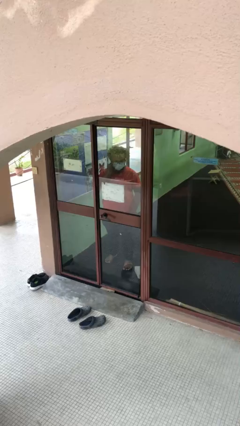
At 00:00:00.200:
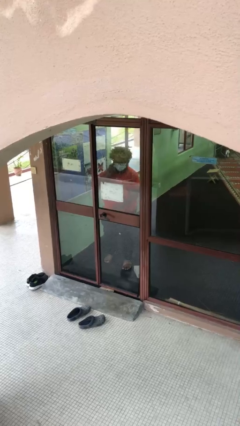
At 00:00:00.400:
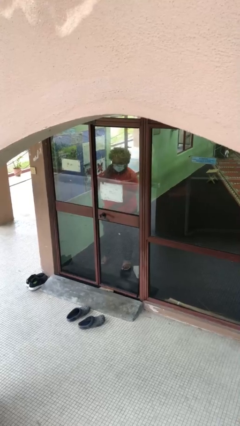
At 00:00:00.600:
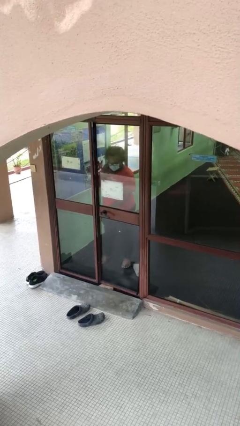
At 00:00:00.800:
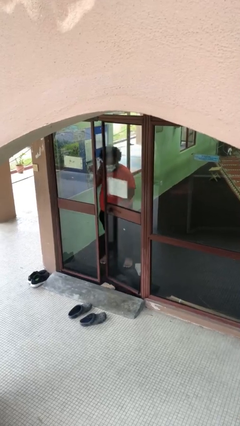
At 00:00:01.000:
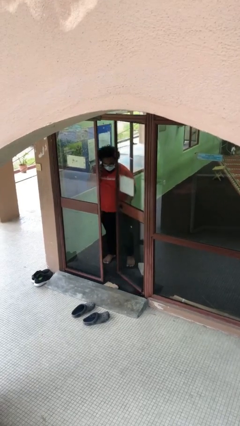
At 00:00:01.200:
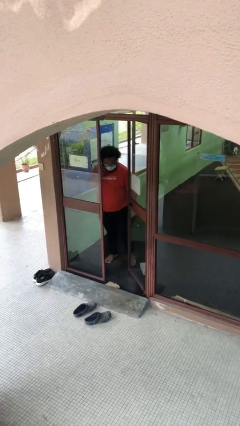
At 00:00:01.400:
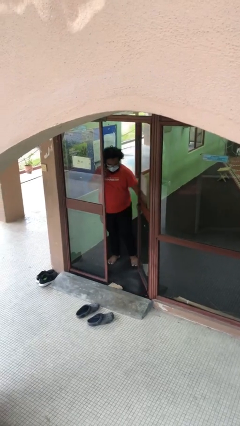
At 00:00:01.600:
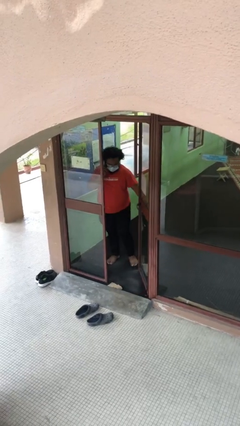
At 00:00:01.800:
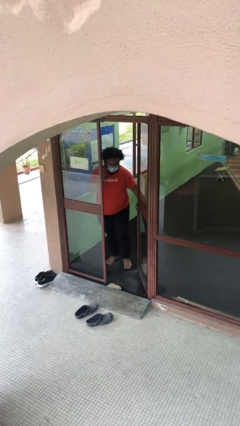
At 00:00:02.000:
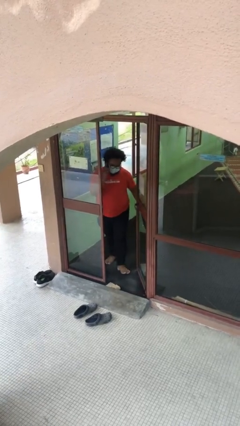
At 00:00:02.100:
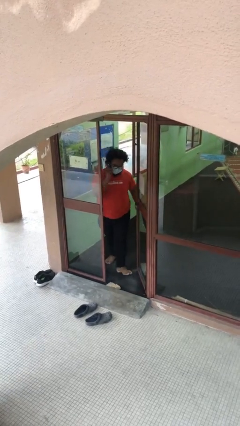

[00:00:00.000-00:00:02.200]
person opens facility door

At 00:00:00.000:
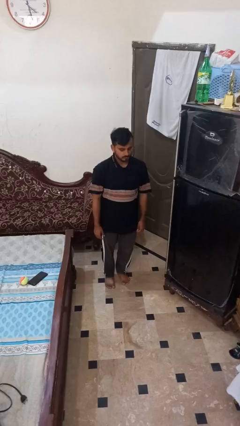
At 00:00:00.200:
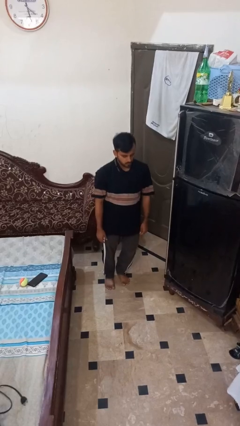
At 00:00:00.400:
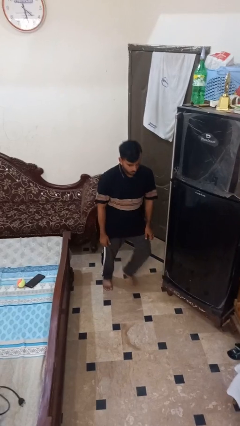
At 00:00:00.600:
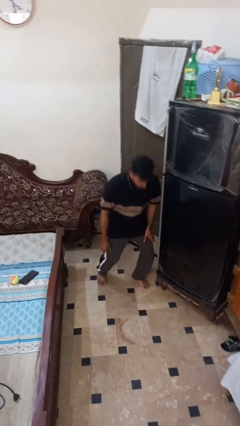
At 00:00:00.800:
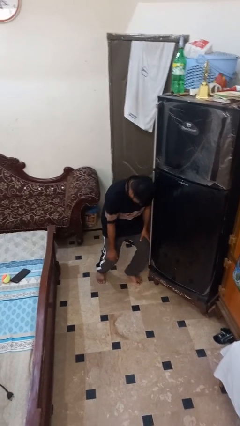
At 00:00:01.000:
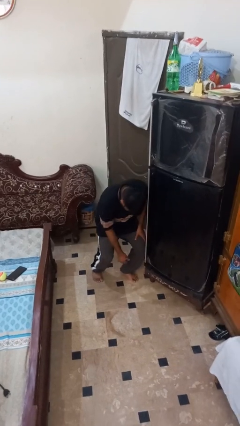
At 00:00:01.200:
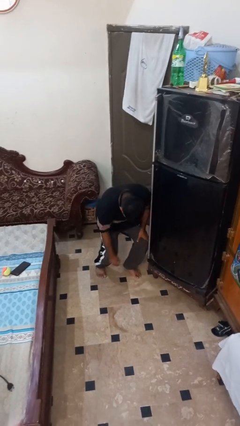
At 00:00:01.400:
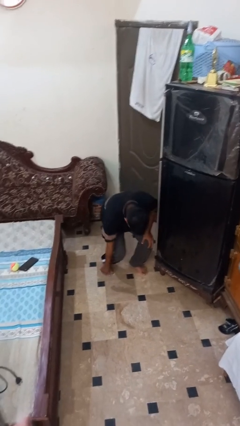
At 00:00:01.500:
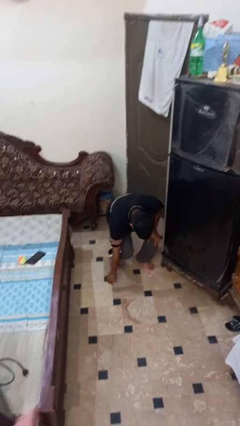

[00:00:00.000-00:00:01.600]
person trips on object on floor

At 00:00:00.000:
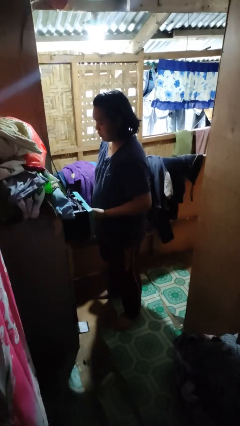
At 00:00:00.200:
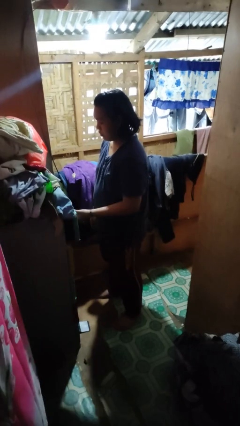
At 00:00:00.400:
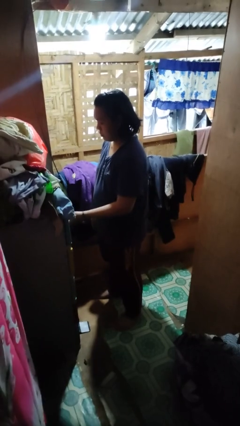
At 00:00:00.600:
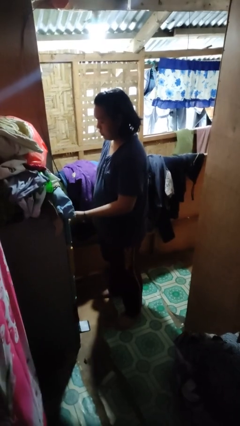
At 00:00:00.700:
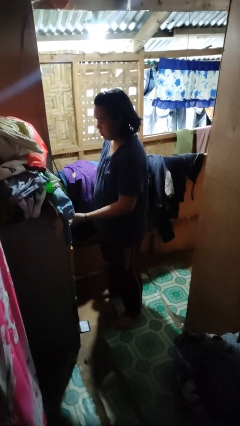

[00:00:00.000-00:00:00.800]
person closes dresser drawer

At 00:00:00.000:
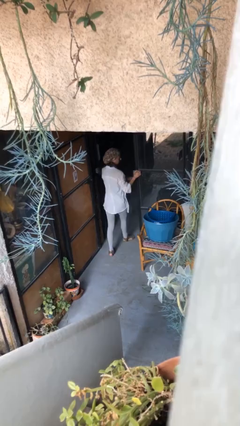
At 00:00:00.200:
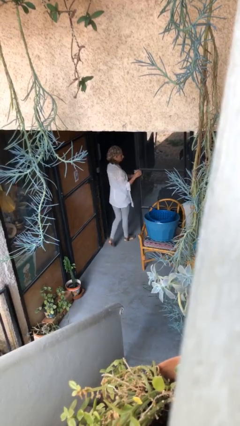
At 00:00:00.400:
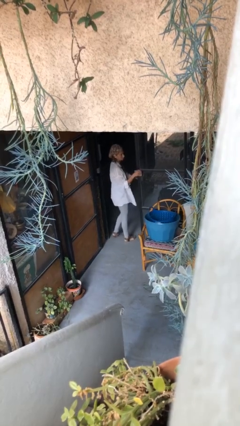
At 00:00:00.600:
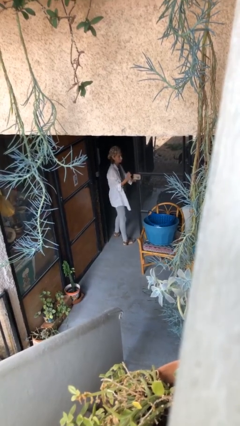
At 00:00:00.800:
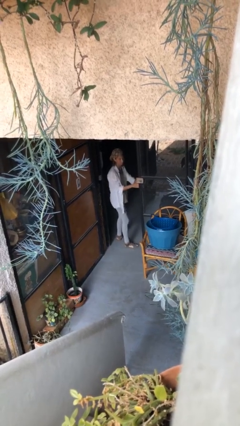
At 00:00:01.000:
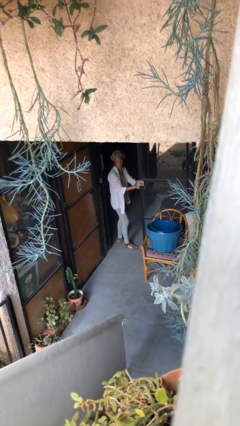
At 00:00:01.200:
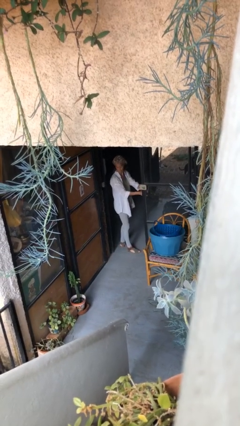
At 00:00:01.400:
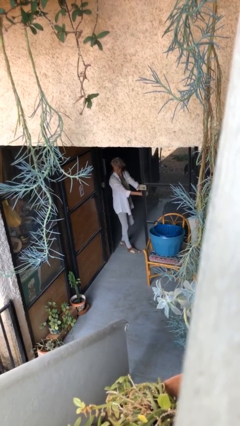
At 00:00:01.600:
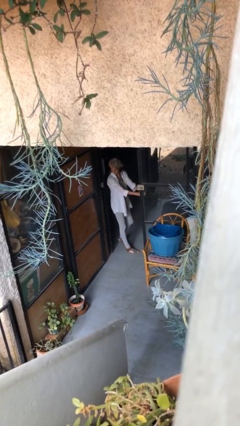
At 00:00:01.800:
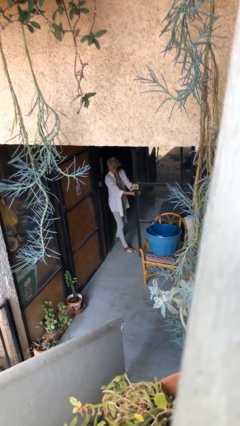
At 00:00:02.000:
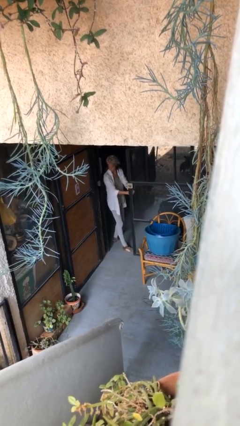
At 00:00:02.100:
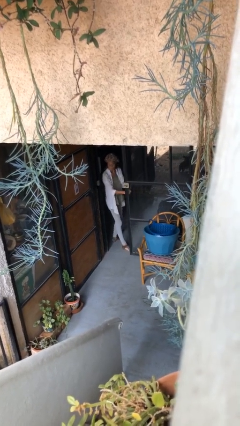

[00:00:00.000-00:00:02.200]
person exits scene through structure

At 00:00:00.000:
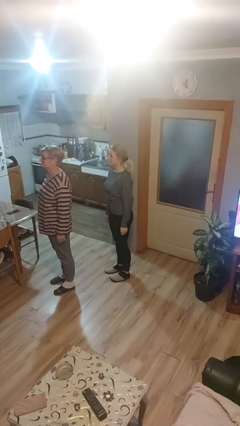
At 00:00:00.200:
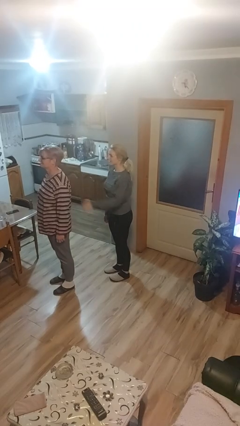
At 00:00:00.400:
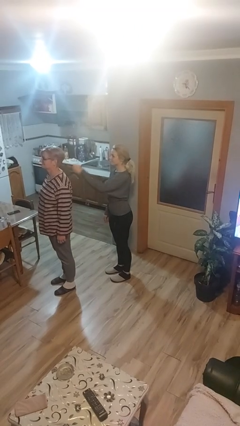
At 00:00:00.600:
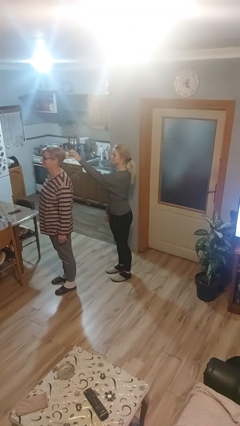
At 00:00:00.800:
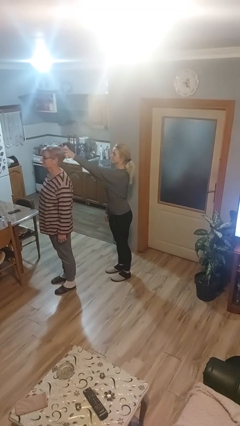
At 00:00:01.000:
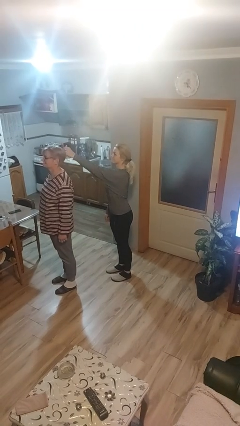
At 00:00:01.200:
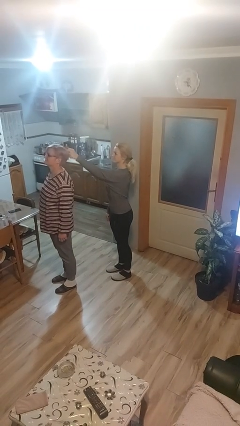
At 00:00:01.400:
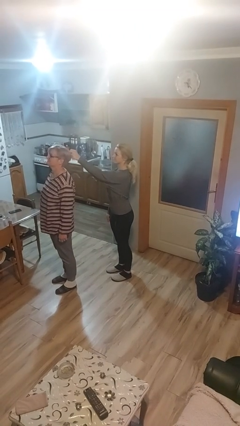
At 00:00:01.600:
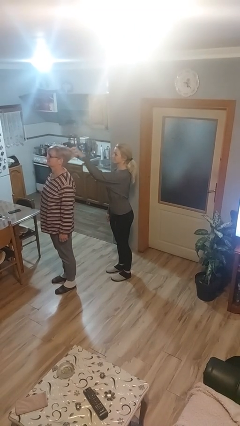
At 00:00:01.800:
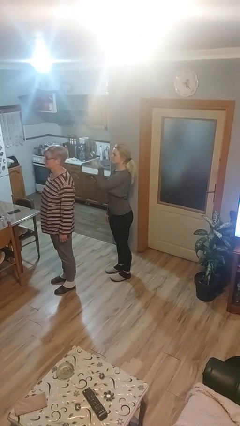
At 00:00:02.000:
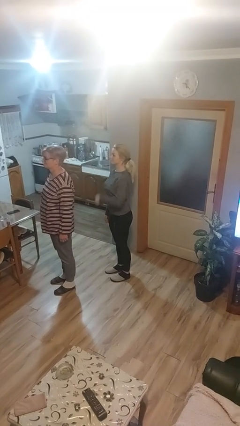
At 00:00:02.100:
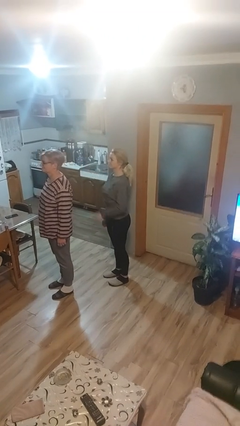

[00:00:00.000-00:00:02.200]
person grabs person by hair

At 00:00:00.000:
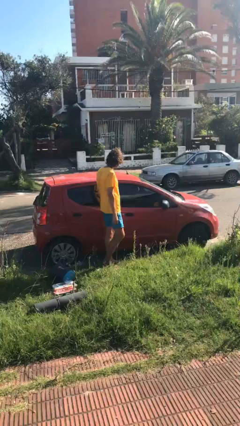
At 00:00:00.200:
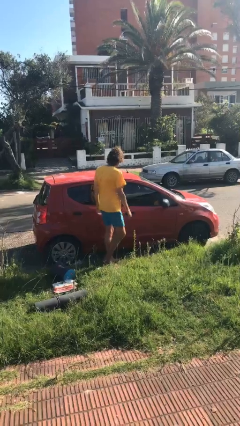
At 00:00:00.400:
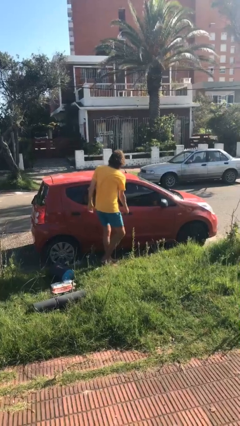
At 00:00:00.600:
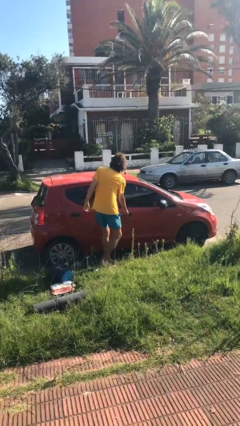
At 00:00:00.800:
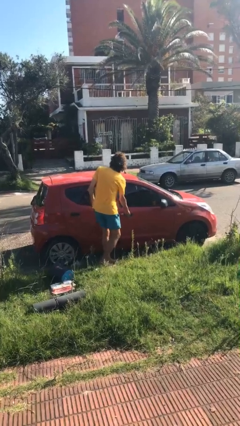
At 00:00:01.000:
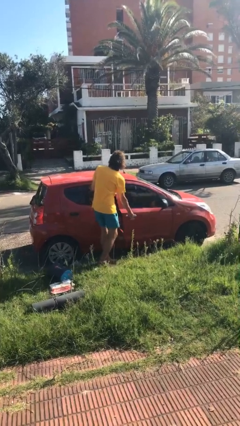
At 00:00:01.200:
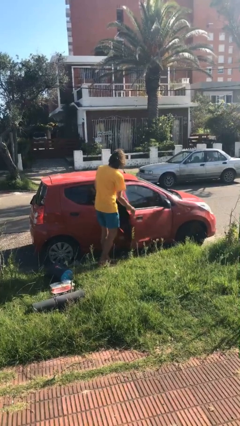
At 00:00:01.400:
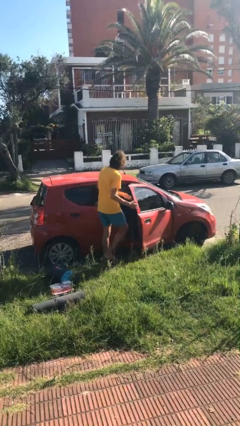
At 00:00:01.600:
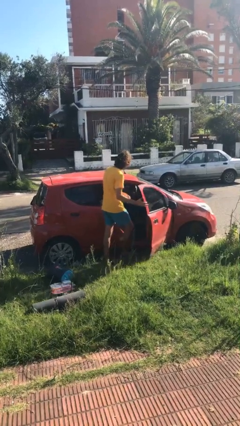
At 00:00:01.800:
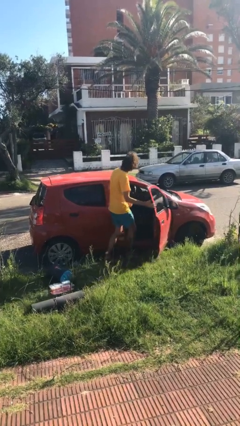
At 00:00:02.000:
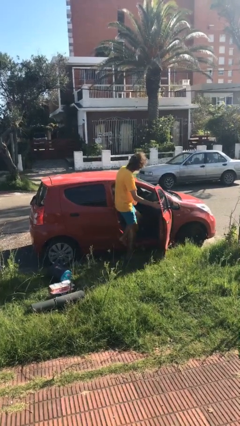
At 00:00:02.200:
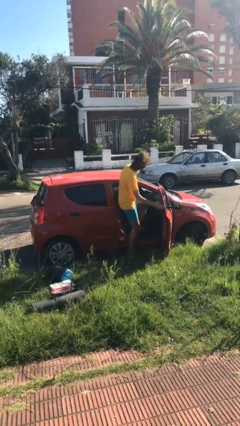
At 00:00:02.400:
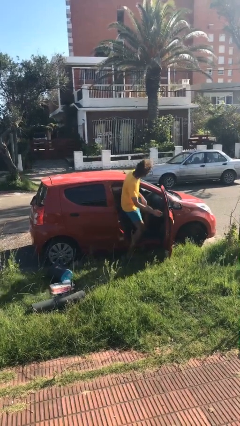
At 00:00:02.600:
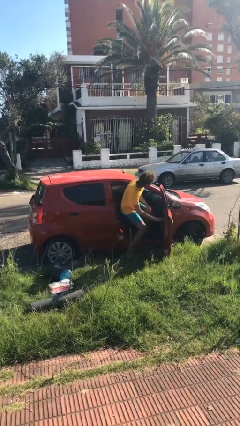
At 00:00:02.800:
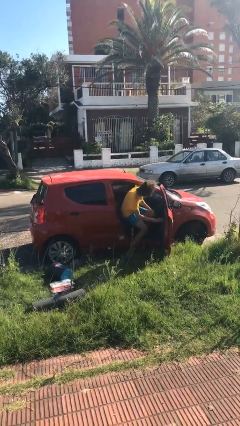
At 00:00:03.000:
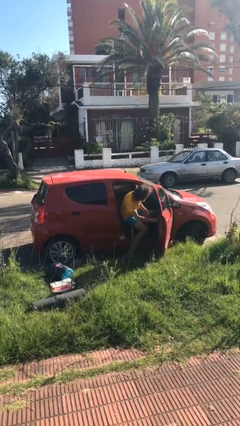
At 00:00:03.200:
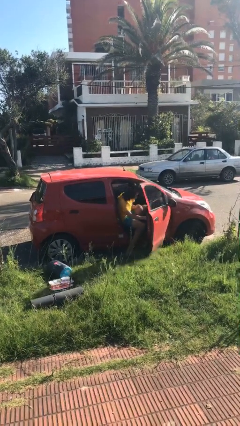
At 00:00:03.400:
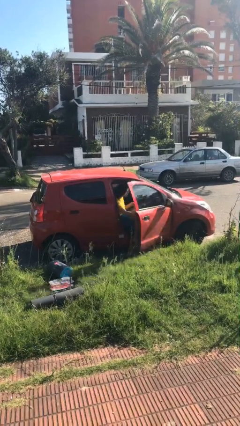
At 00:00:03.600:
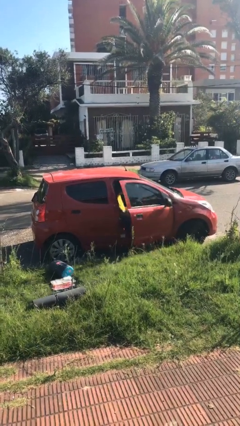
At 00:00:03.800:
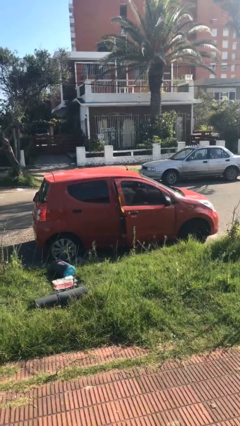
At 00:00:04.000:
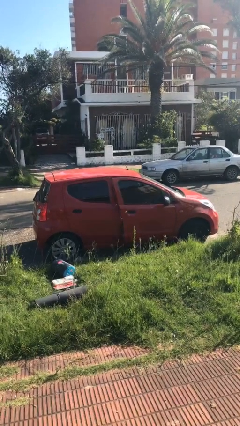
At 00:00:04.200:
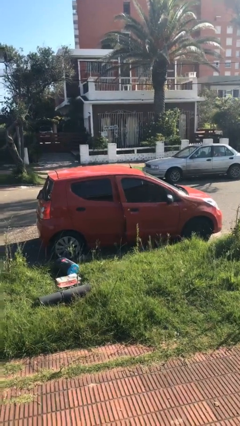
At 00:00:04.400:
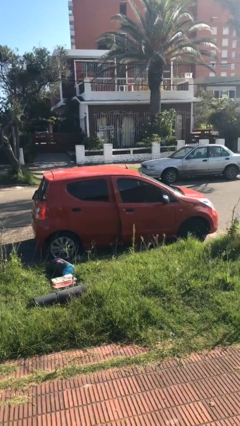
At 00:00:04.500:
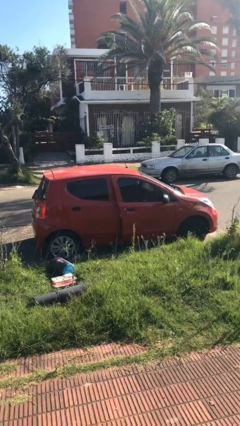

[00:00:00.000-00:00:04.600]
car picks up person

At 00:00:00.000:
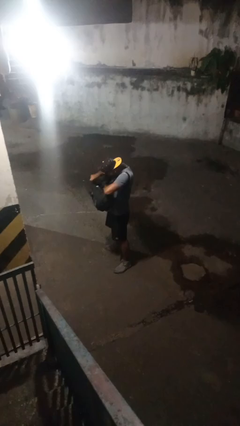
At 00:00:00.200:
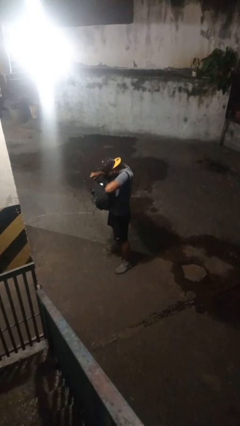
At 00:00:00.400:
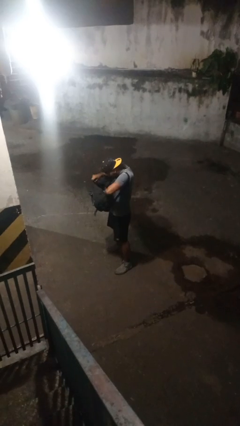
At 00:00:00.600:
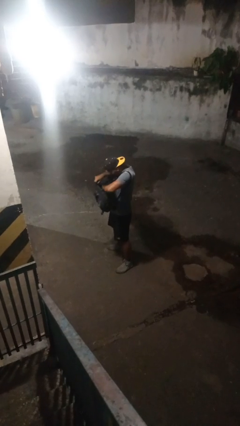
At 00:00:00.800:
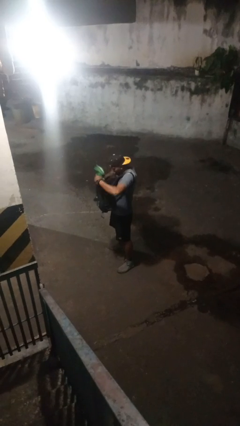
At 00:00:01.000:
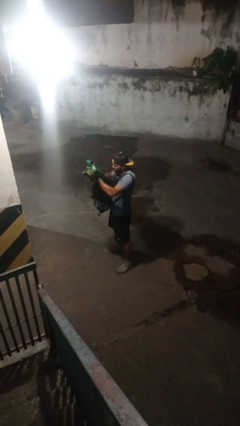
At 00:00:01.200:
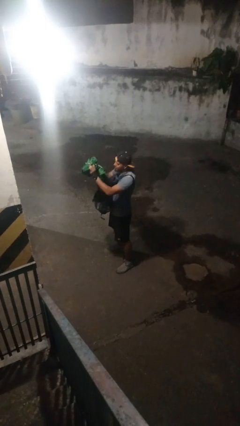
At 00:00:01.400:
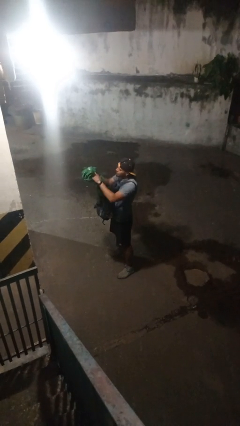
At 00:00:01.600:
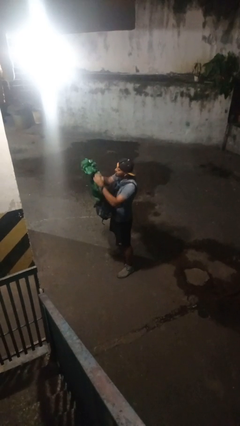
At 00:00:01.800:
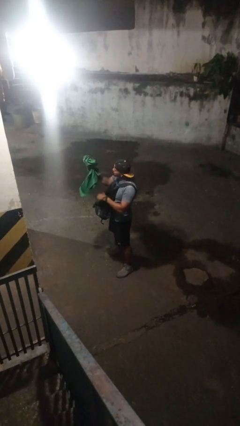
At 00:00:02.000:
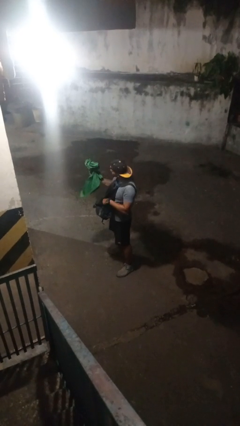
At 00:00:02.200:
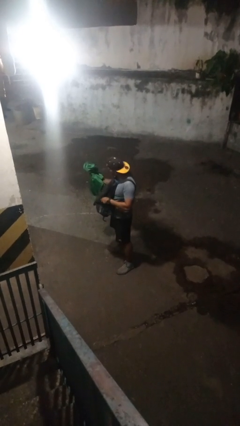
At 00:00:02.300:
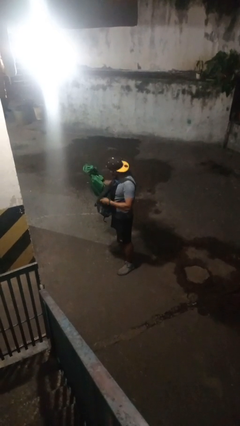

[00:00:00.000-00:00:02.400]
person takes object from backpack

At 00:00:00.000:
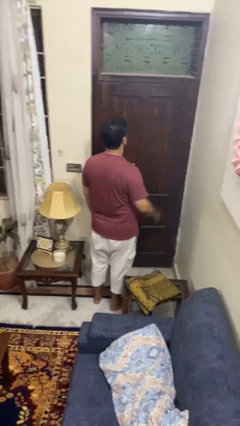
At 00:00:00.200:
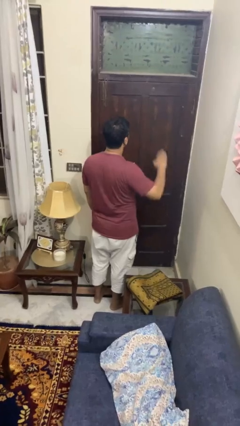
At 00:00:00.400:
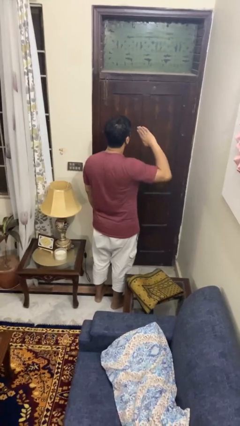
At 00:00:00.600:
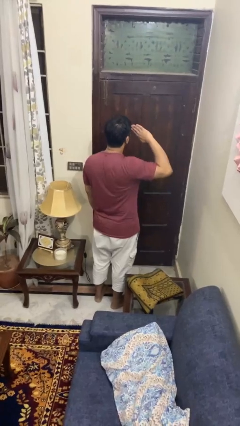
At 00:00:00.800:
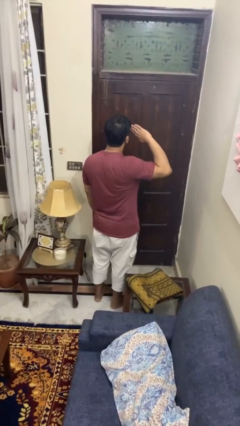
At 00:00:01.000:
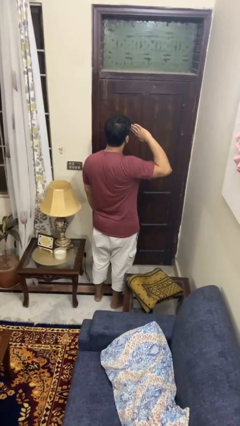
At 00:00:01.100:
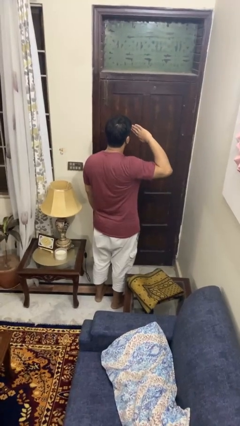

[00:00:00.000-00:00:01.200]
person salutes
